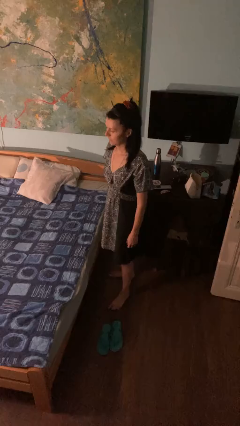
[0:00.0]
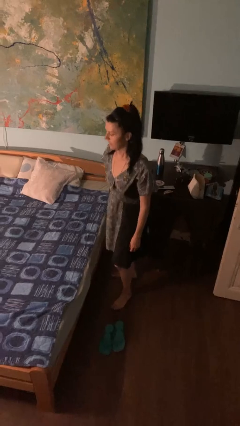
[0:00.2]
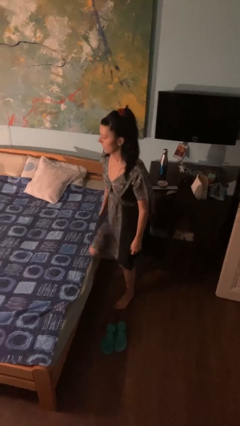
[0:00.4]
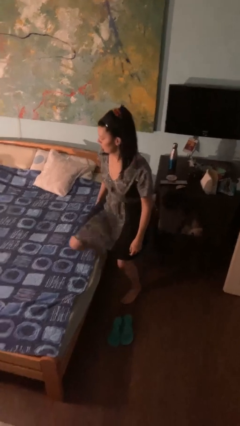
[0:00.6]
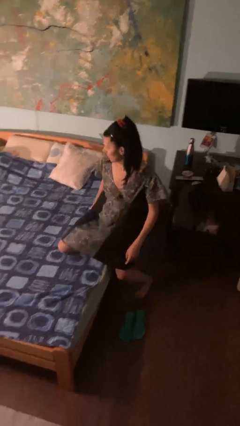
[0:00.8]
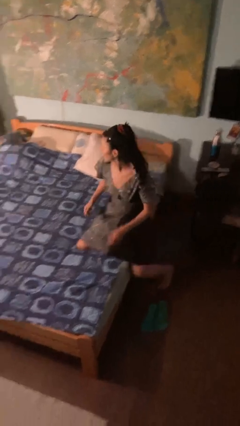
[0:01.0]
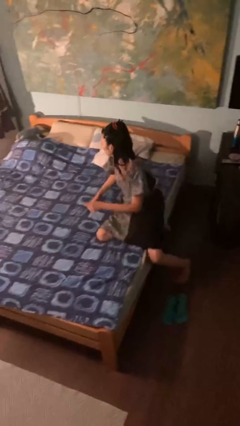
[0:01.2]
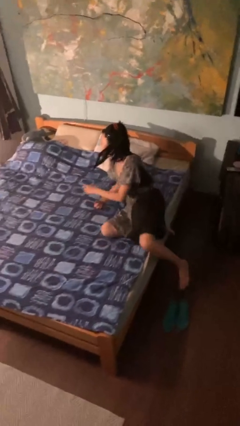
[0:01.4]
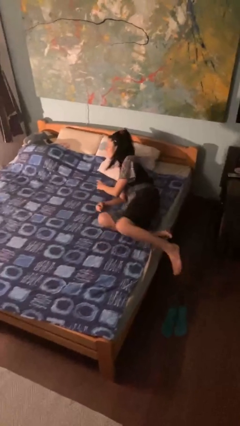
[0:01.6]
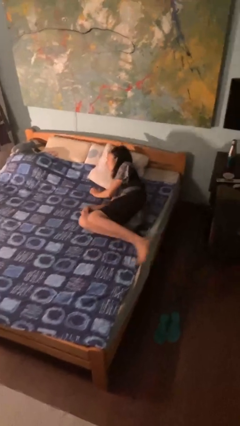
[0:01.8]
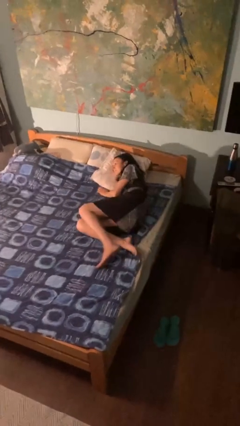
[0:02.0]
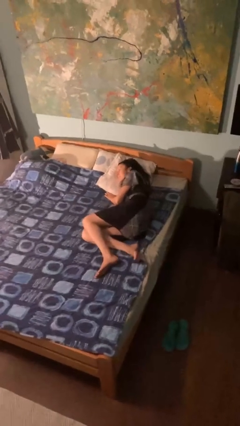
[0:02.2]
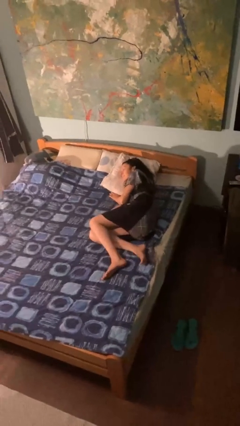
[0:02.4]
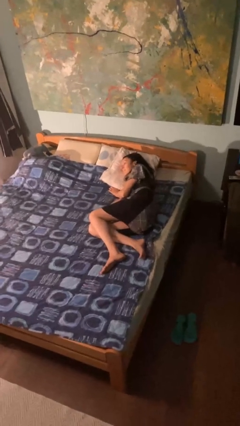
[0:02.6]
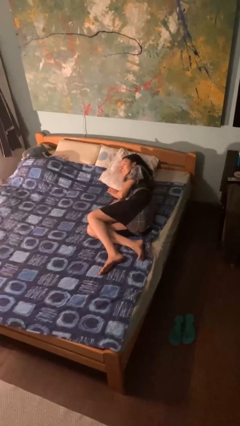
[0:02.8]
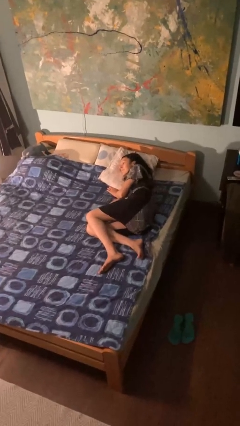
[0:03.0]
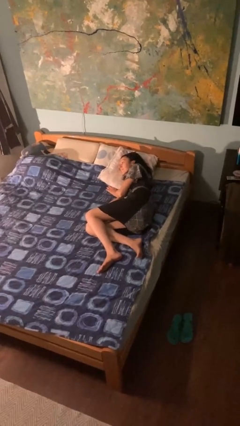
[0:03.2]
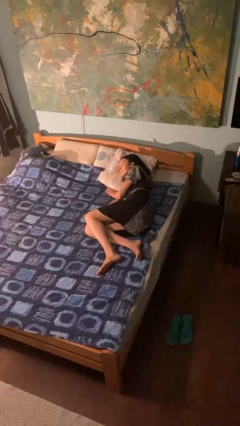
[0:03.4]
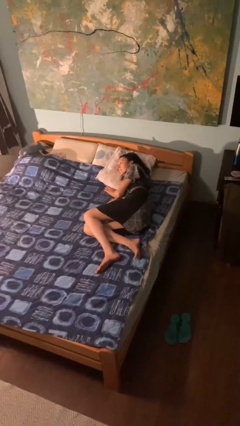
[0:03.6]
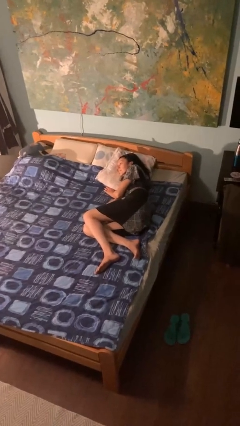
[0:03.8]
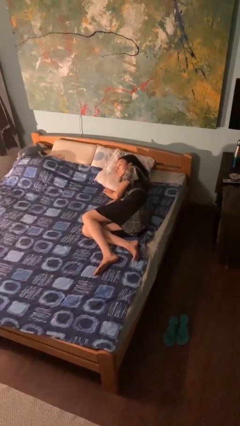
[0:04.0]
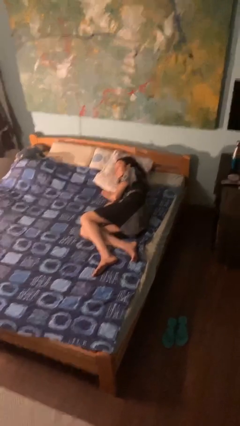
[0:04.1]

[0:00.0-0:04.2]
person lies down on bed

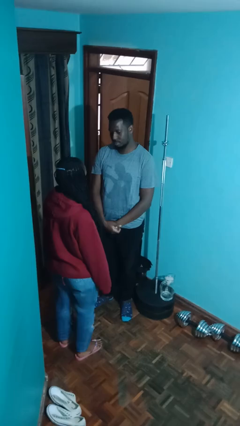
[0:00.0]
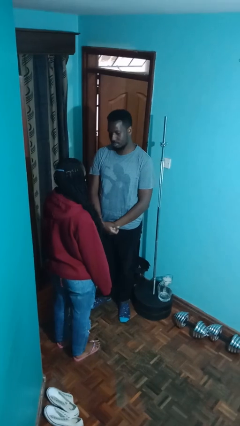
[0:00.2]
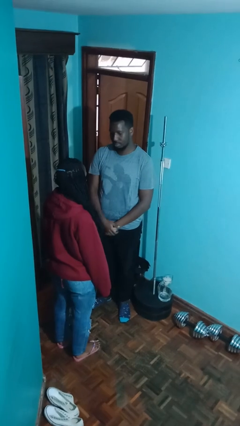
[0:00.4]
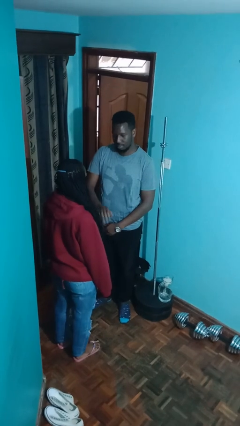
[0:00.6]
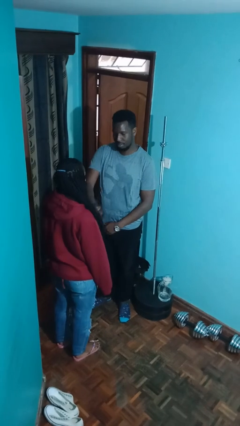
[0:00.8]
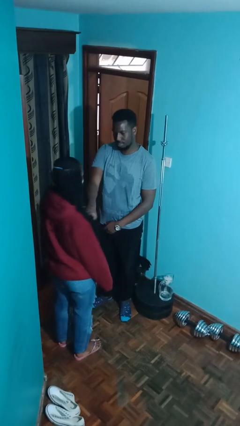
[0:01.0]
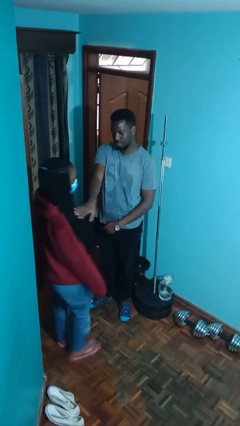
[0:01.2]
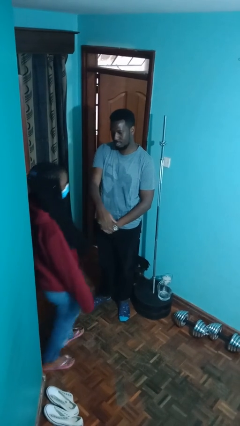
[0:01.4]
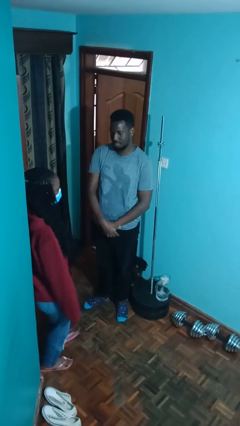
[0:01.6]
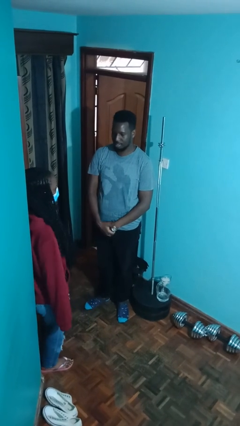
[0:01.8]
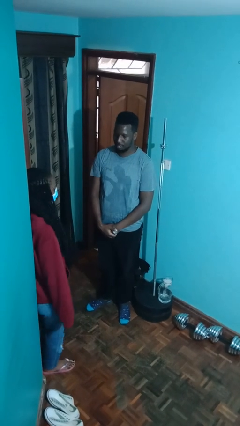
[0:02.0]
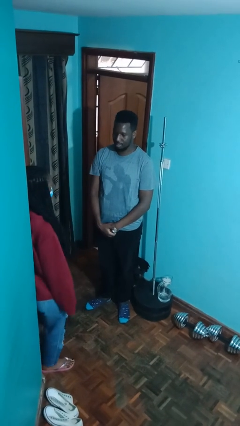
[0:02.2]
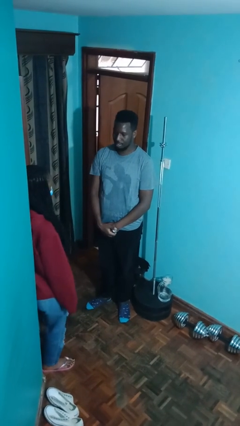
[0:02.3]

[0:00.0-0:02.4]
person shoves person

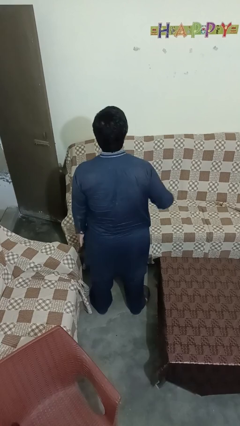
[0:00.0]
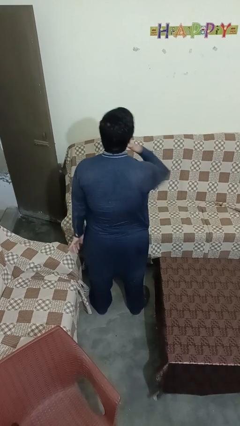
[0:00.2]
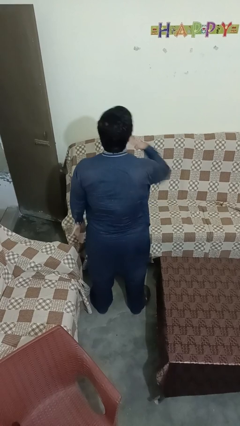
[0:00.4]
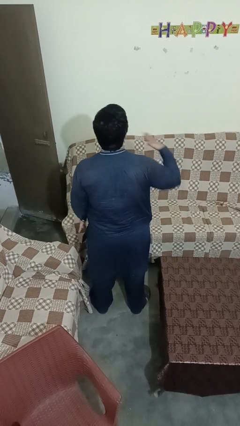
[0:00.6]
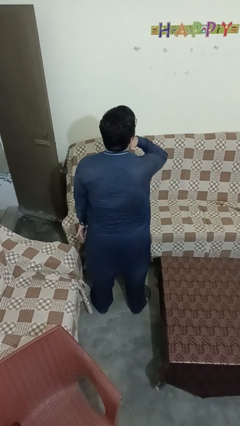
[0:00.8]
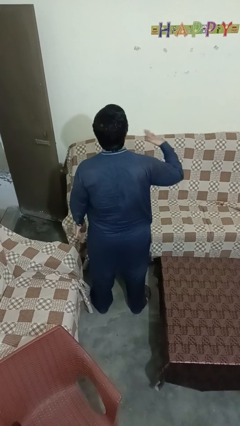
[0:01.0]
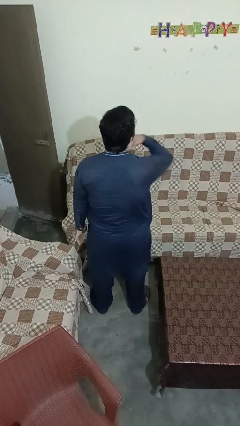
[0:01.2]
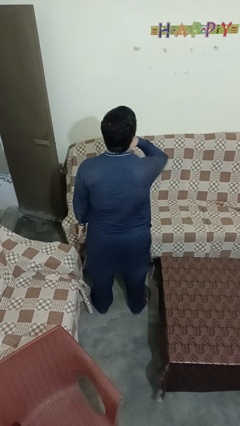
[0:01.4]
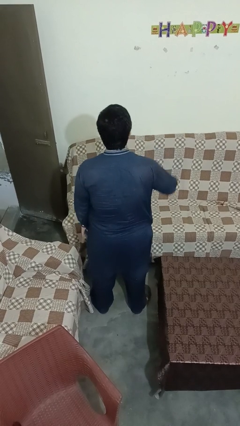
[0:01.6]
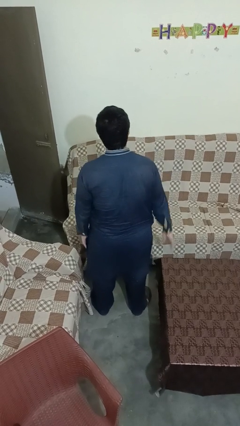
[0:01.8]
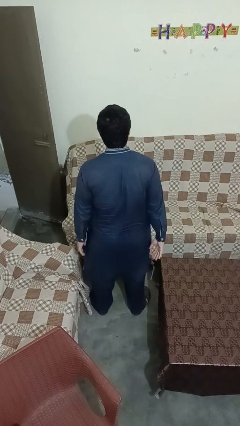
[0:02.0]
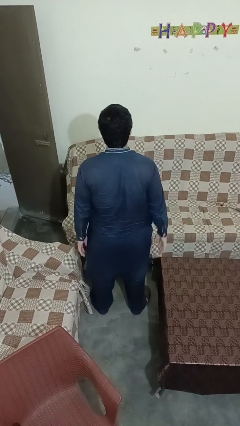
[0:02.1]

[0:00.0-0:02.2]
person gestures cut

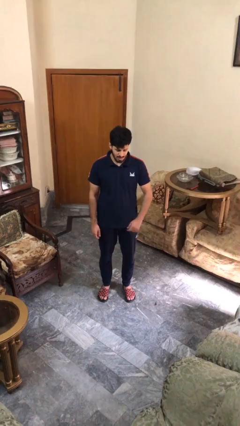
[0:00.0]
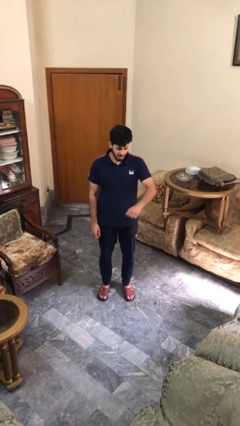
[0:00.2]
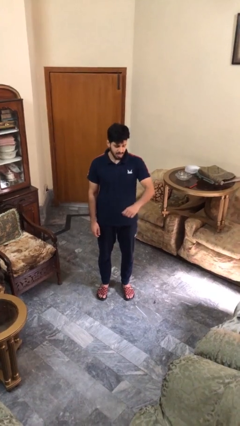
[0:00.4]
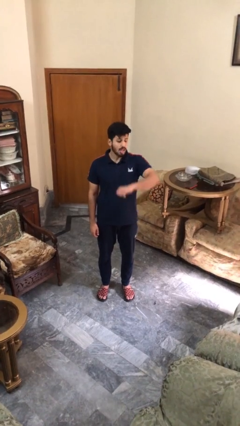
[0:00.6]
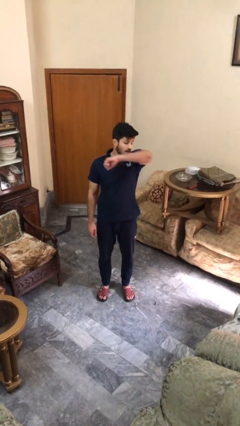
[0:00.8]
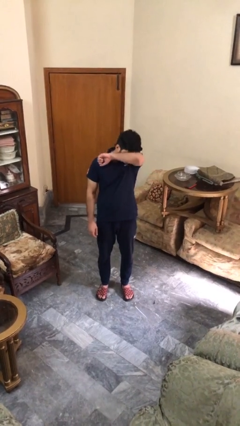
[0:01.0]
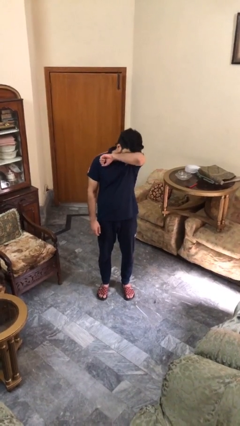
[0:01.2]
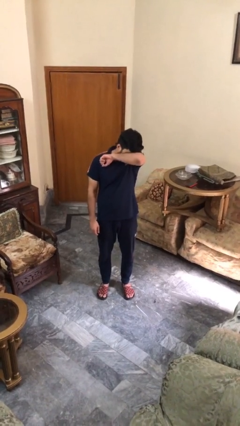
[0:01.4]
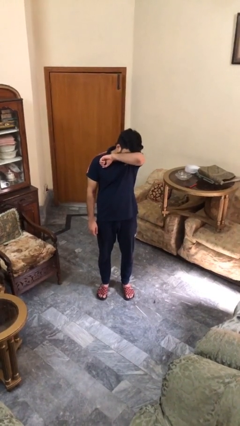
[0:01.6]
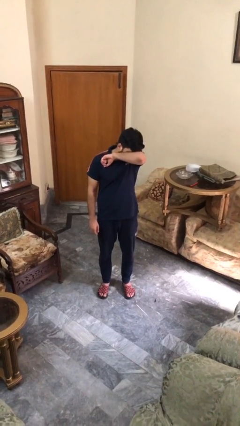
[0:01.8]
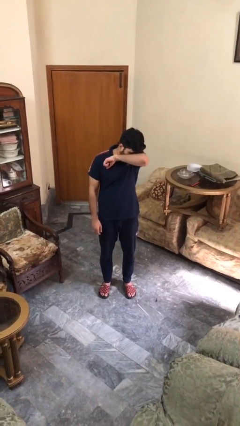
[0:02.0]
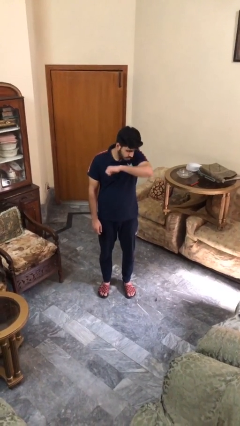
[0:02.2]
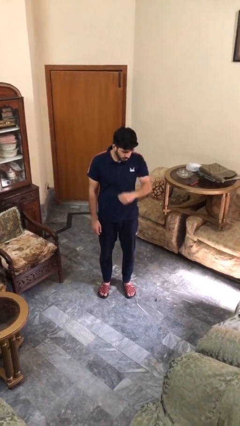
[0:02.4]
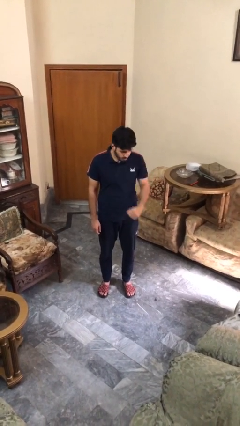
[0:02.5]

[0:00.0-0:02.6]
person sneezes into arm

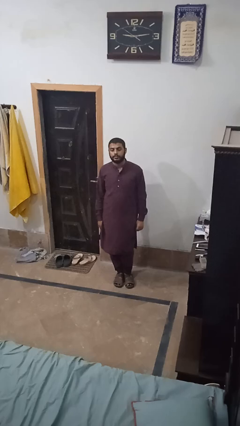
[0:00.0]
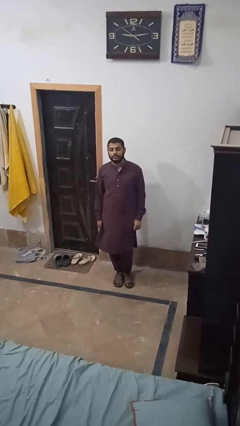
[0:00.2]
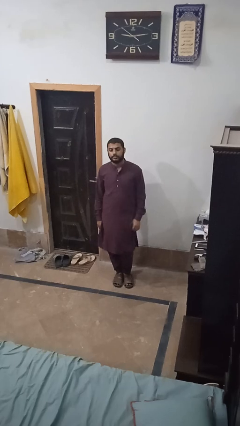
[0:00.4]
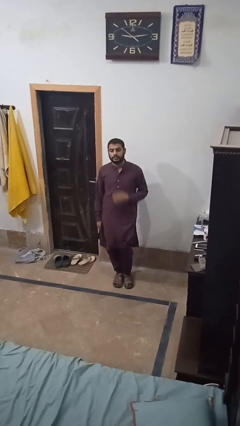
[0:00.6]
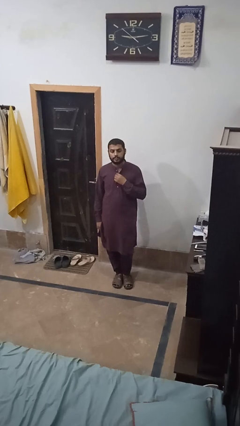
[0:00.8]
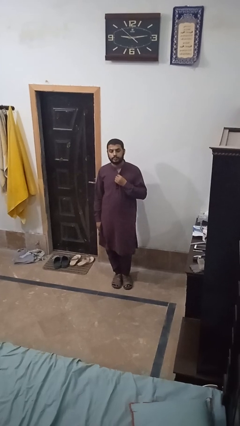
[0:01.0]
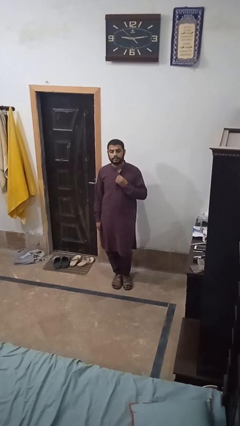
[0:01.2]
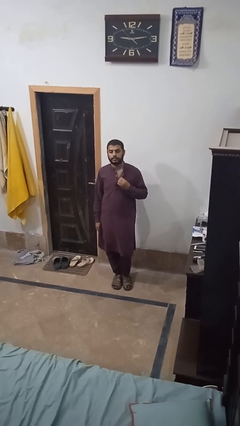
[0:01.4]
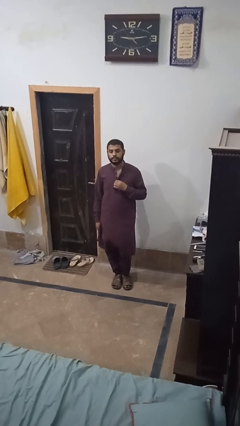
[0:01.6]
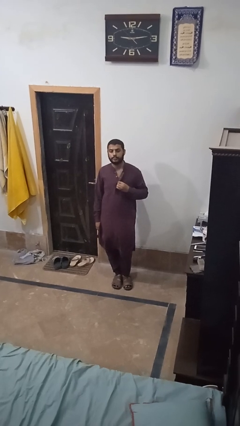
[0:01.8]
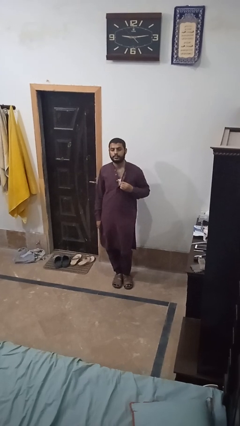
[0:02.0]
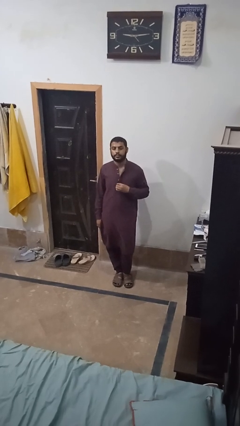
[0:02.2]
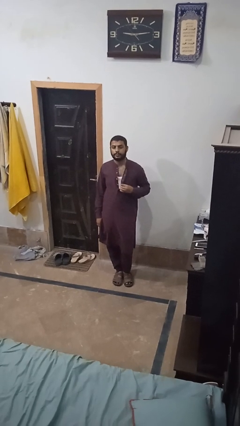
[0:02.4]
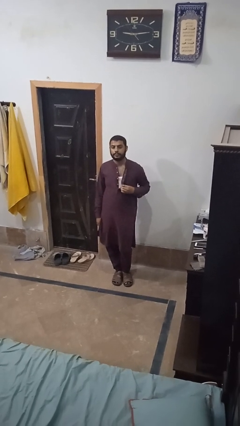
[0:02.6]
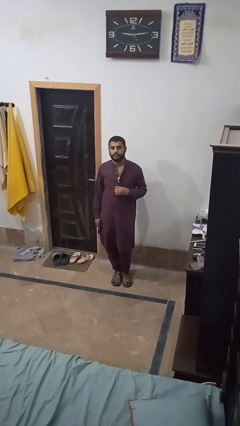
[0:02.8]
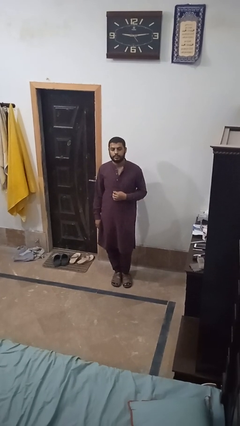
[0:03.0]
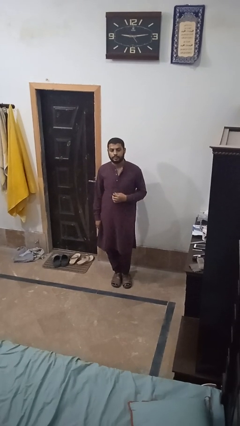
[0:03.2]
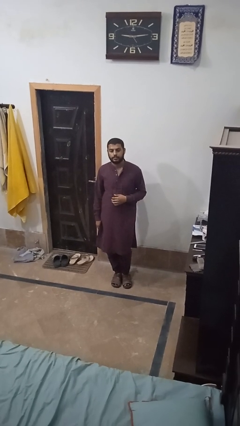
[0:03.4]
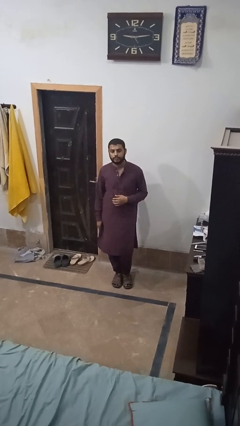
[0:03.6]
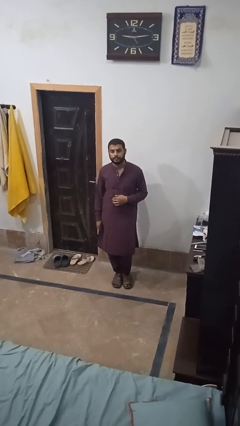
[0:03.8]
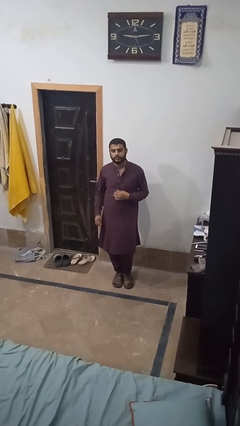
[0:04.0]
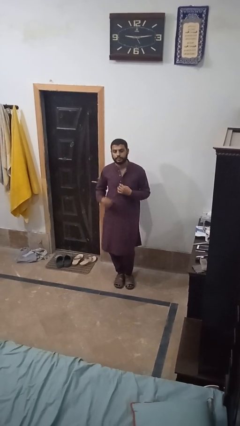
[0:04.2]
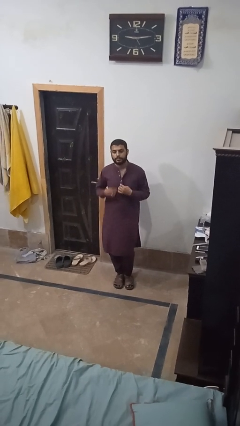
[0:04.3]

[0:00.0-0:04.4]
person unbuttons shirt

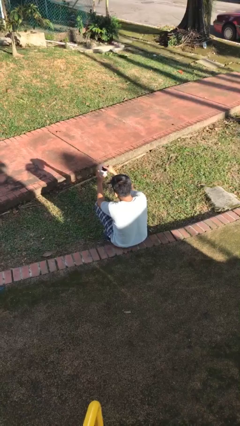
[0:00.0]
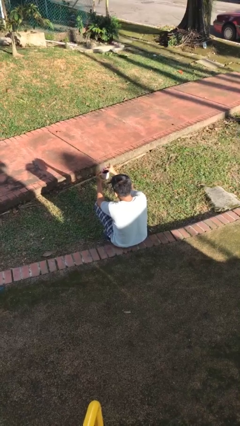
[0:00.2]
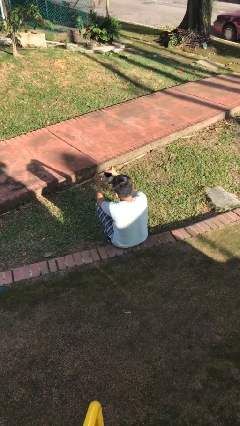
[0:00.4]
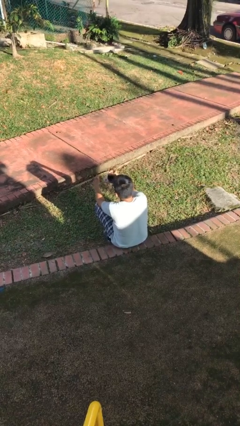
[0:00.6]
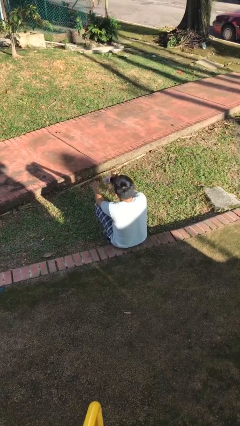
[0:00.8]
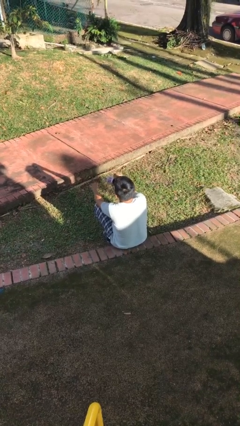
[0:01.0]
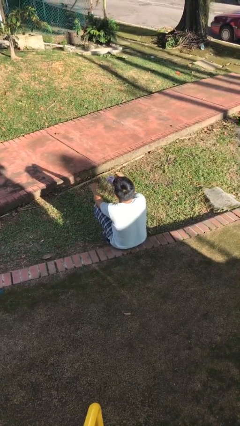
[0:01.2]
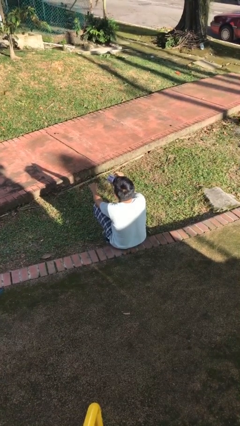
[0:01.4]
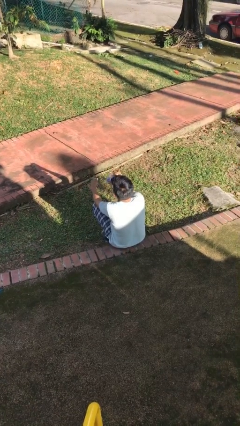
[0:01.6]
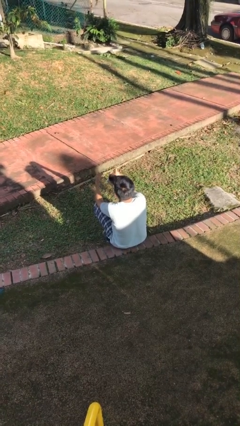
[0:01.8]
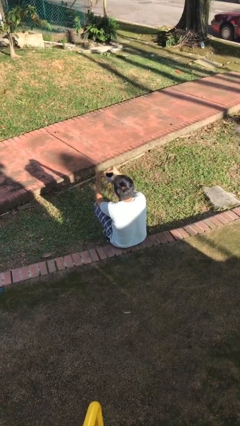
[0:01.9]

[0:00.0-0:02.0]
person drinks from mug
